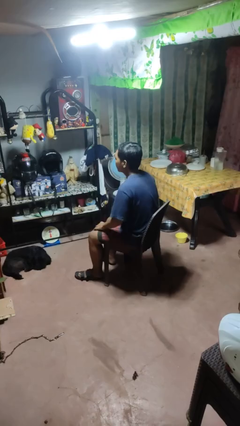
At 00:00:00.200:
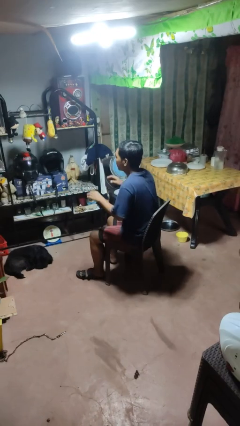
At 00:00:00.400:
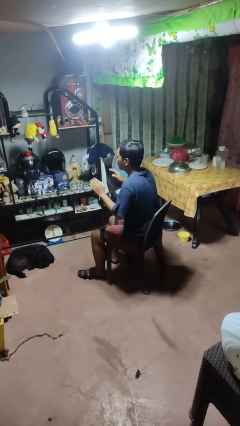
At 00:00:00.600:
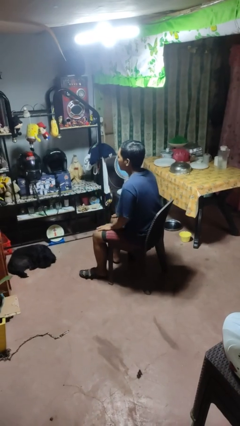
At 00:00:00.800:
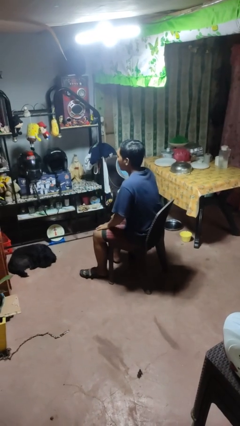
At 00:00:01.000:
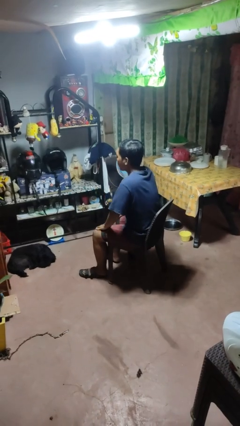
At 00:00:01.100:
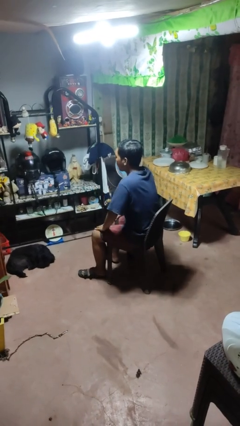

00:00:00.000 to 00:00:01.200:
person slaps hands on thighs

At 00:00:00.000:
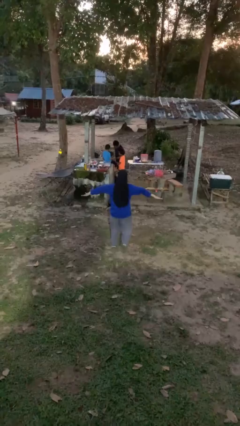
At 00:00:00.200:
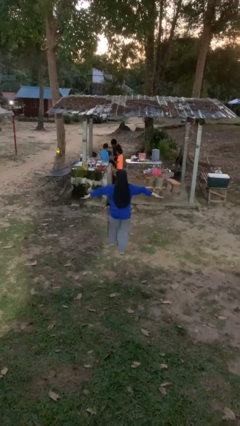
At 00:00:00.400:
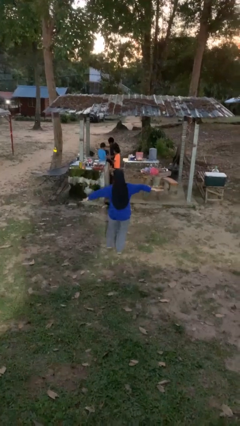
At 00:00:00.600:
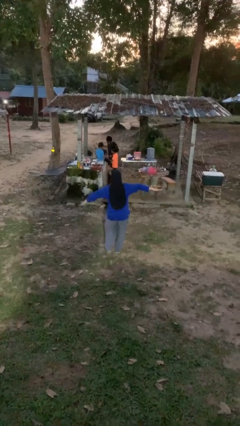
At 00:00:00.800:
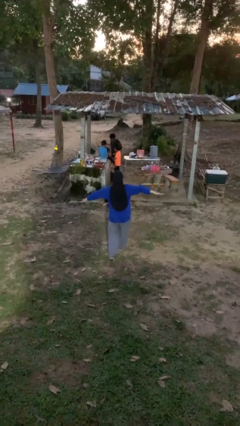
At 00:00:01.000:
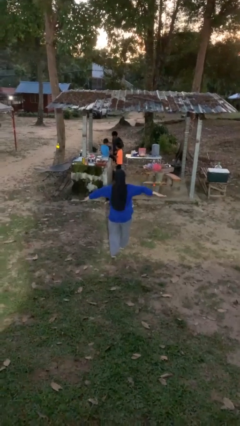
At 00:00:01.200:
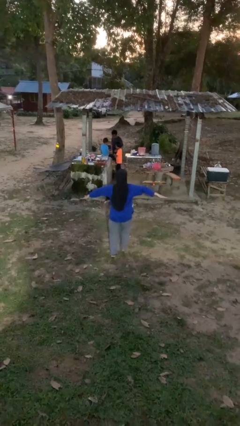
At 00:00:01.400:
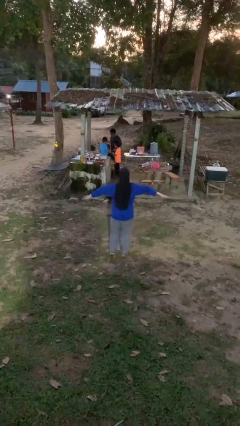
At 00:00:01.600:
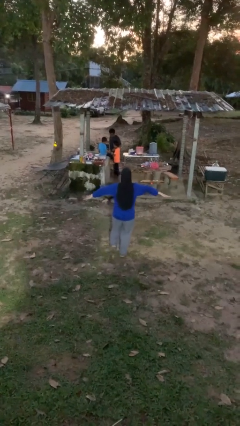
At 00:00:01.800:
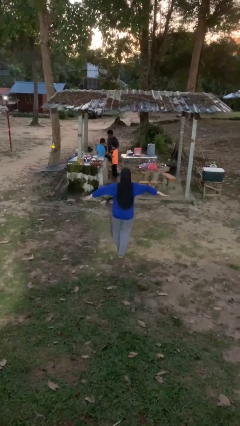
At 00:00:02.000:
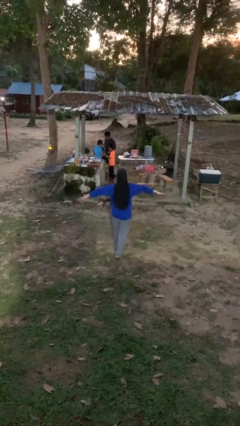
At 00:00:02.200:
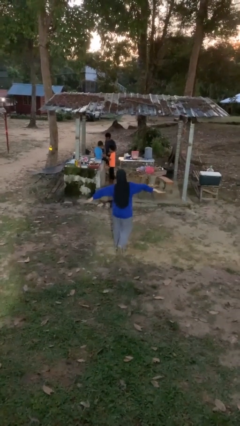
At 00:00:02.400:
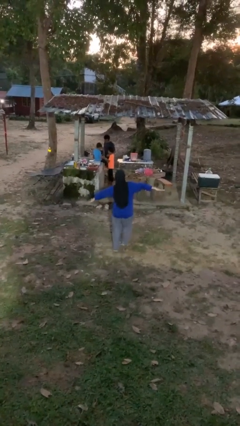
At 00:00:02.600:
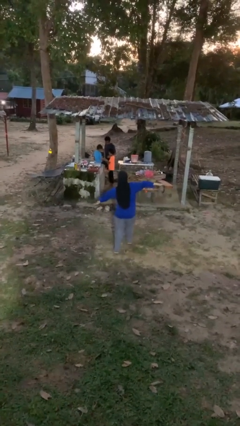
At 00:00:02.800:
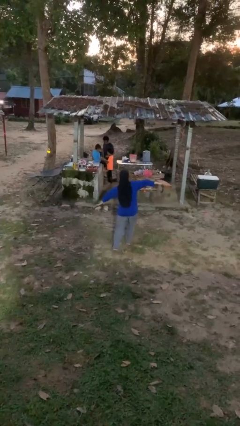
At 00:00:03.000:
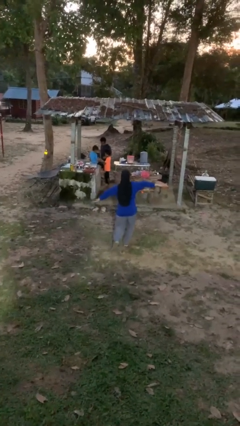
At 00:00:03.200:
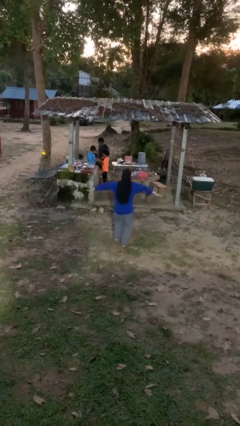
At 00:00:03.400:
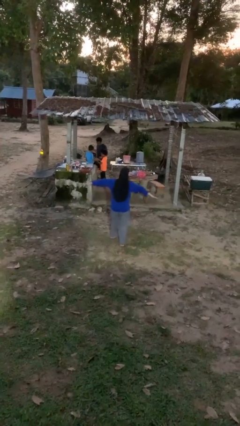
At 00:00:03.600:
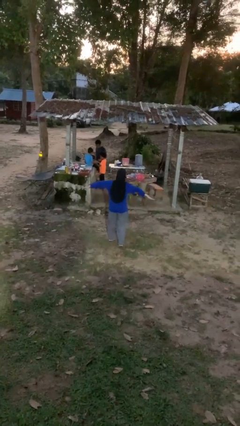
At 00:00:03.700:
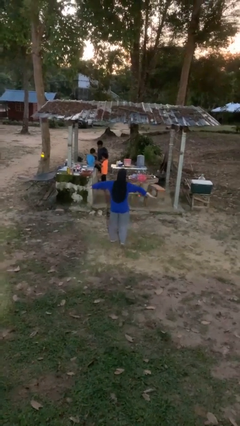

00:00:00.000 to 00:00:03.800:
person walks tiptoe

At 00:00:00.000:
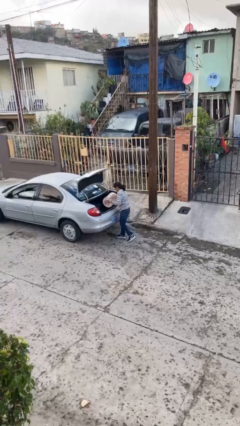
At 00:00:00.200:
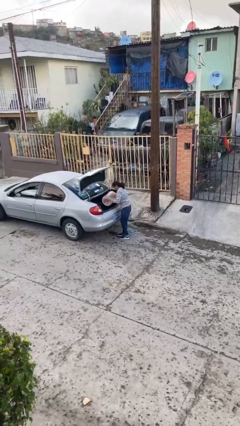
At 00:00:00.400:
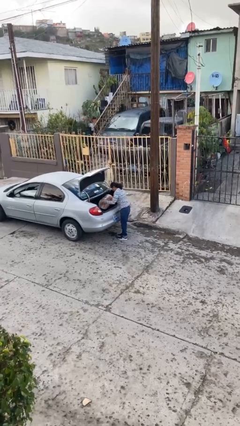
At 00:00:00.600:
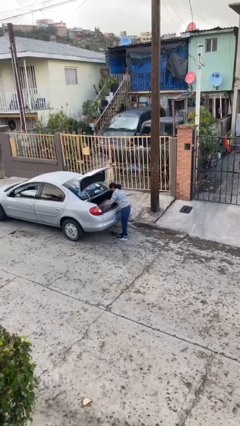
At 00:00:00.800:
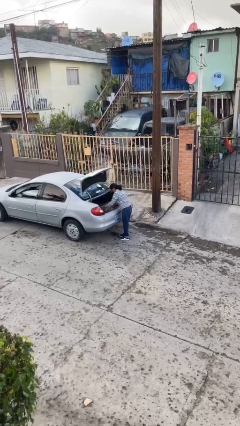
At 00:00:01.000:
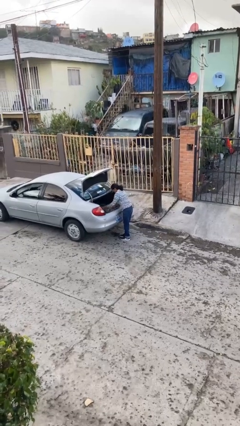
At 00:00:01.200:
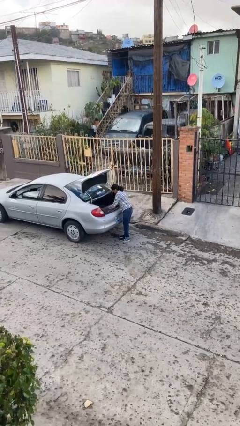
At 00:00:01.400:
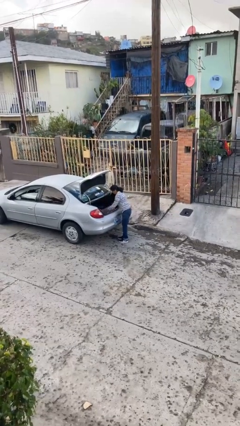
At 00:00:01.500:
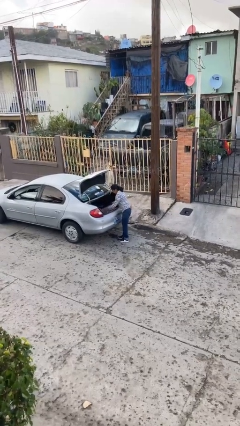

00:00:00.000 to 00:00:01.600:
person loads car

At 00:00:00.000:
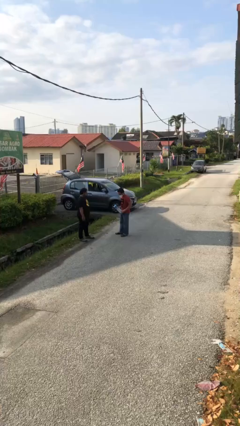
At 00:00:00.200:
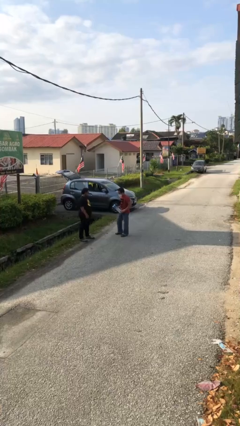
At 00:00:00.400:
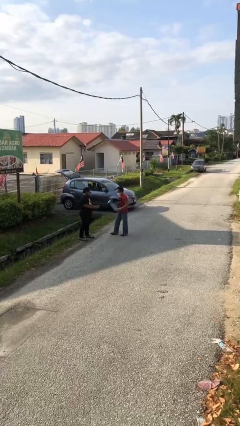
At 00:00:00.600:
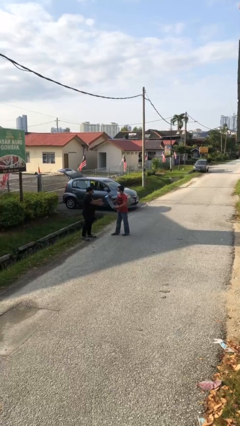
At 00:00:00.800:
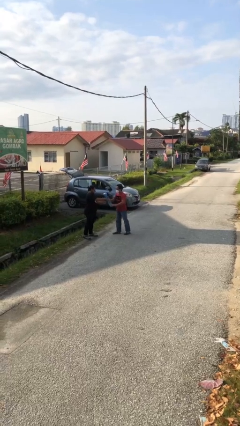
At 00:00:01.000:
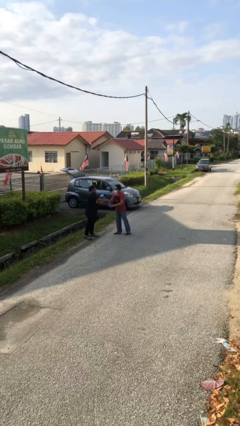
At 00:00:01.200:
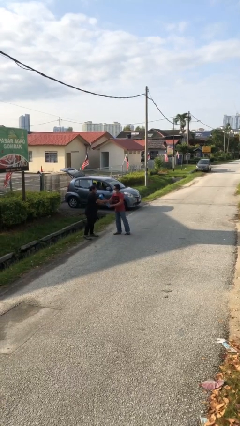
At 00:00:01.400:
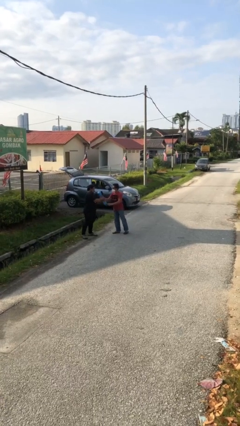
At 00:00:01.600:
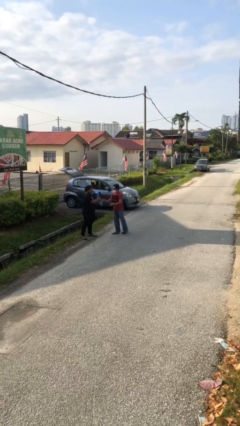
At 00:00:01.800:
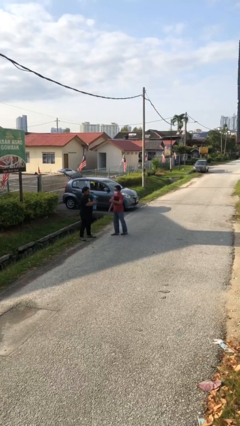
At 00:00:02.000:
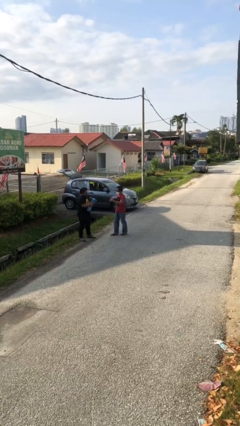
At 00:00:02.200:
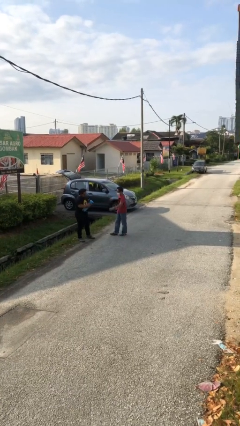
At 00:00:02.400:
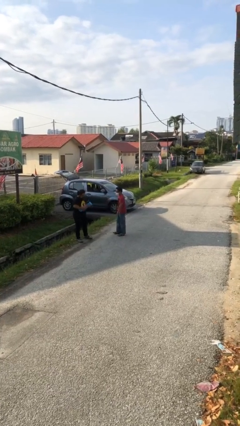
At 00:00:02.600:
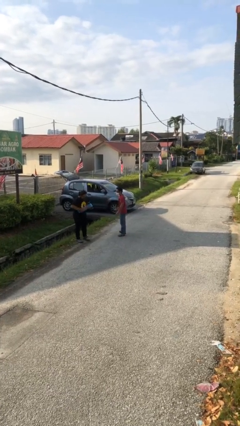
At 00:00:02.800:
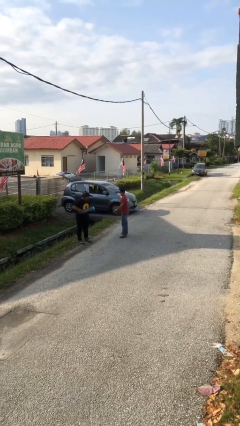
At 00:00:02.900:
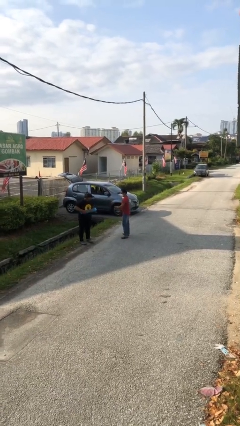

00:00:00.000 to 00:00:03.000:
person transfers object to person

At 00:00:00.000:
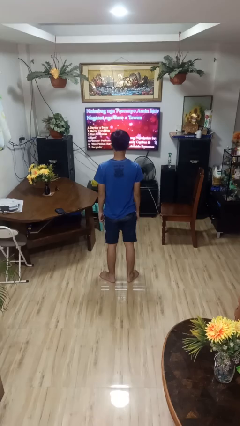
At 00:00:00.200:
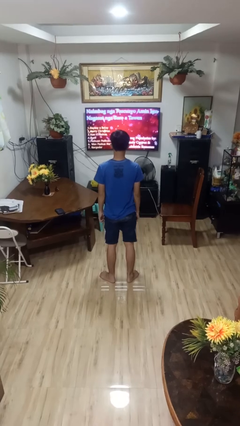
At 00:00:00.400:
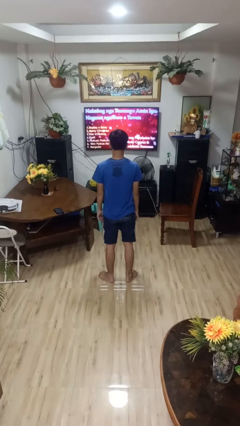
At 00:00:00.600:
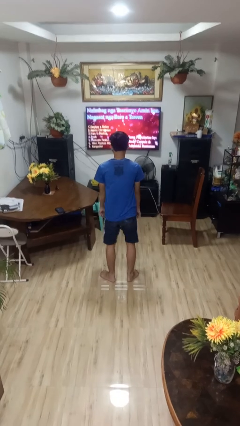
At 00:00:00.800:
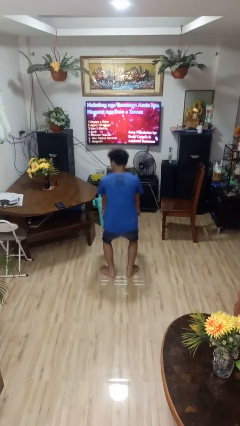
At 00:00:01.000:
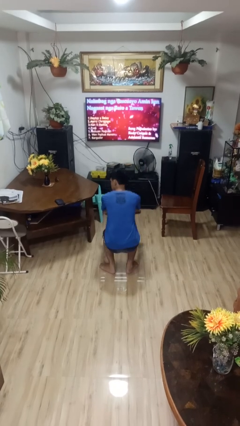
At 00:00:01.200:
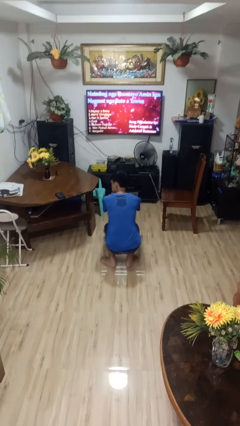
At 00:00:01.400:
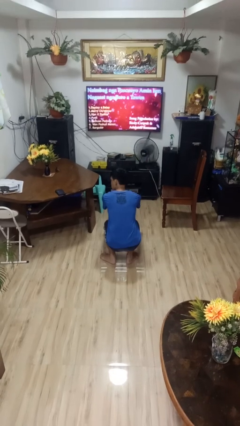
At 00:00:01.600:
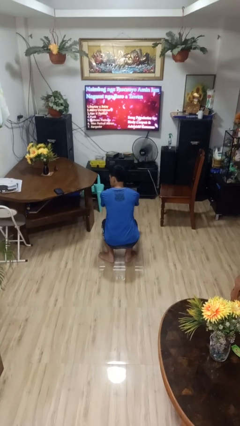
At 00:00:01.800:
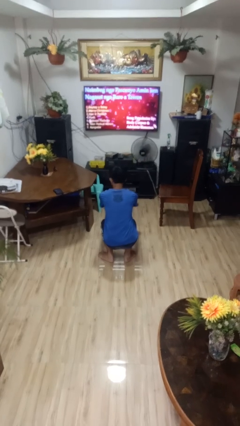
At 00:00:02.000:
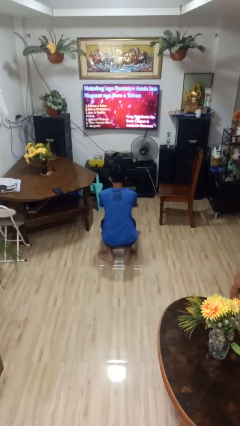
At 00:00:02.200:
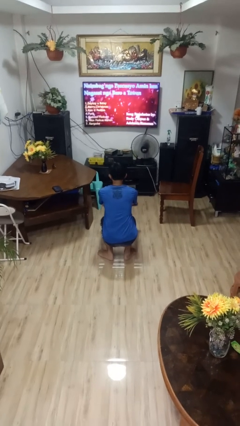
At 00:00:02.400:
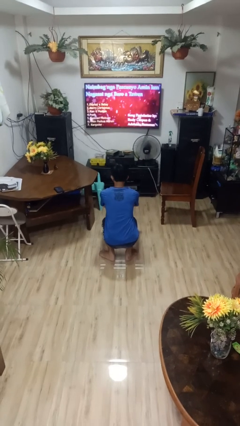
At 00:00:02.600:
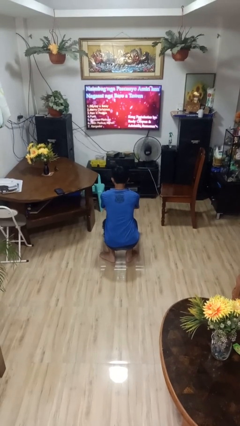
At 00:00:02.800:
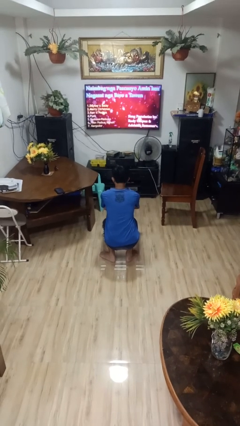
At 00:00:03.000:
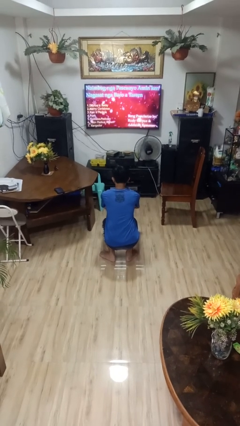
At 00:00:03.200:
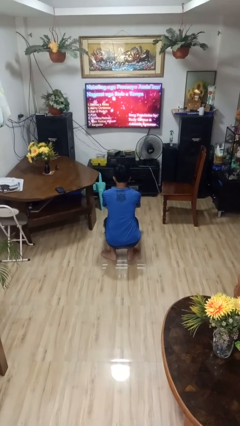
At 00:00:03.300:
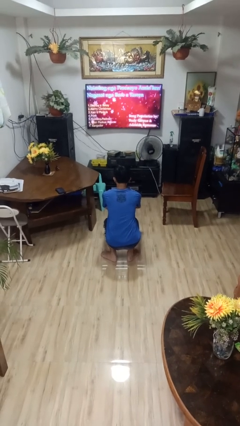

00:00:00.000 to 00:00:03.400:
person squats

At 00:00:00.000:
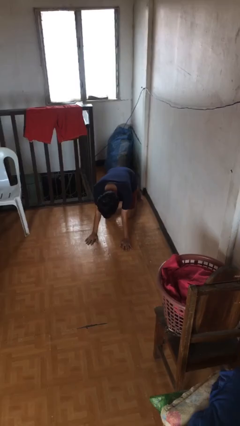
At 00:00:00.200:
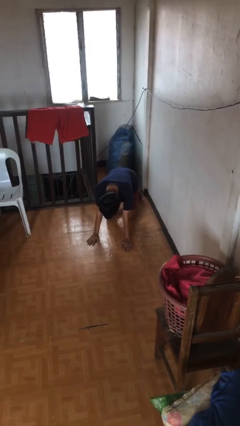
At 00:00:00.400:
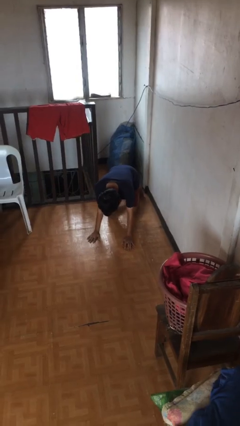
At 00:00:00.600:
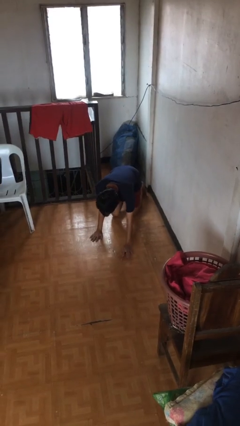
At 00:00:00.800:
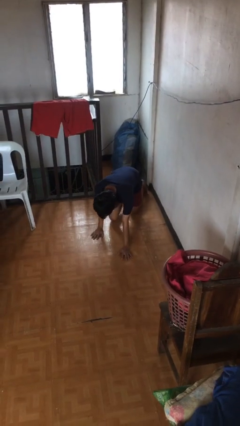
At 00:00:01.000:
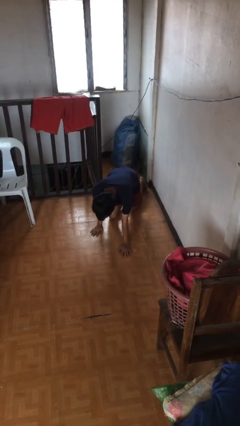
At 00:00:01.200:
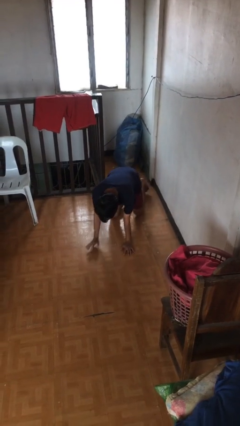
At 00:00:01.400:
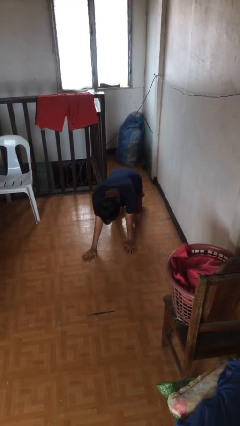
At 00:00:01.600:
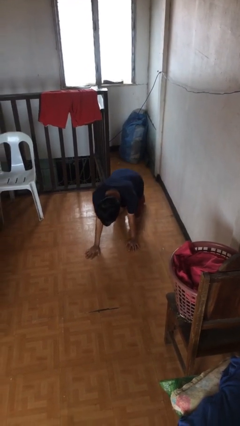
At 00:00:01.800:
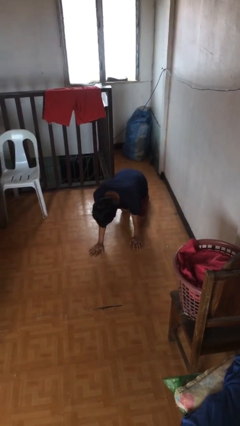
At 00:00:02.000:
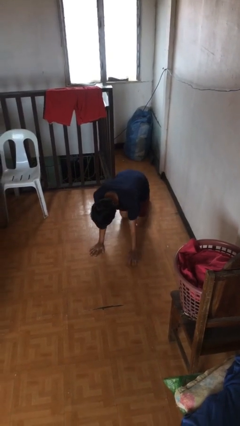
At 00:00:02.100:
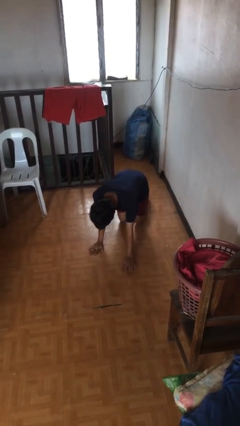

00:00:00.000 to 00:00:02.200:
person crawls

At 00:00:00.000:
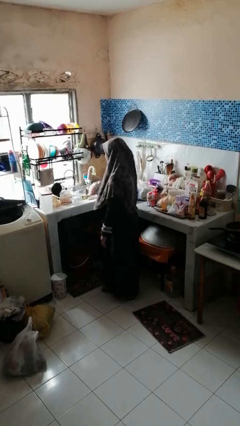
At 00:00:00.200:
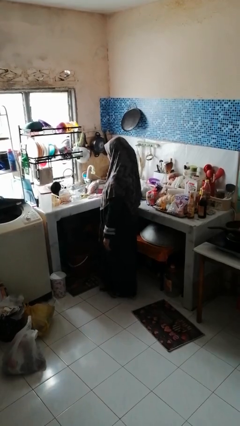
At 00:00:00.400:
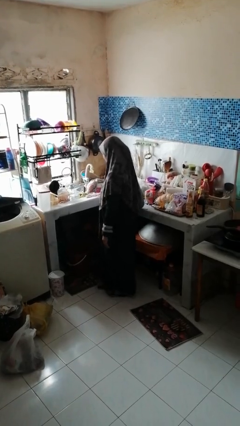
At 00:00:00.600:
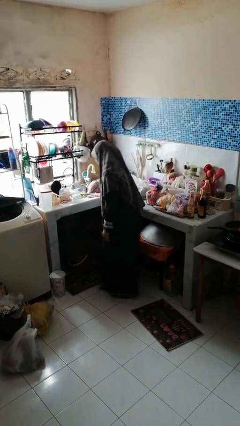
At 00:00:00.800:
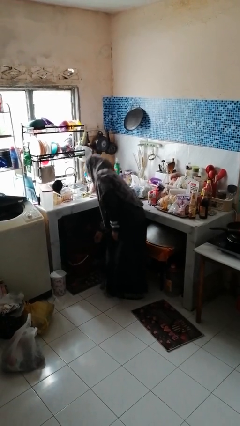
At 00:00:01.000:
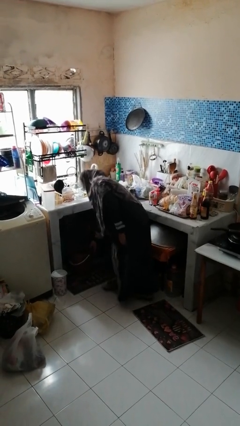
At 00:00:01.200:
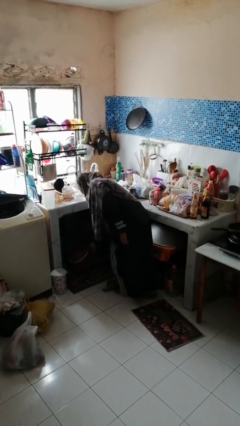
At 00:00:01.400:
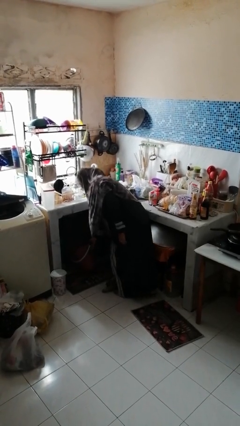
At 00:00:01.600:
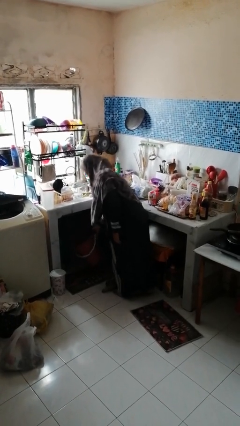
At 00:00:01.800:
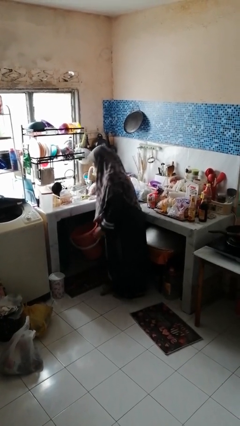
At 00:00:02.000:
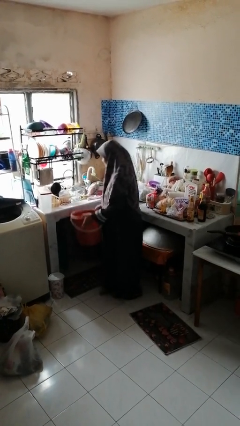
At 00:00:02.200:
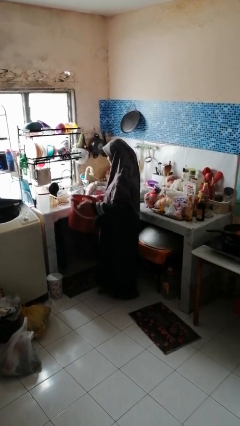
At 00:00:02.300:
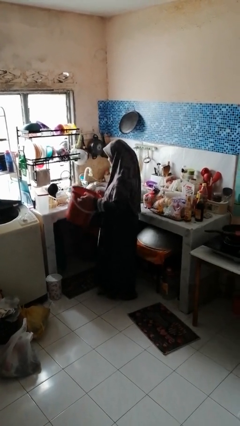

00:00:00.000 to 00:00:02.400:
person picks up object from cabinet
